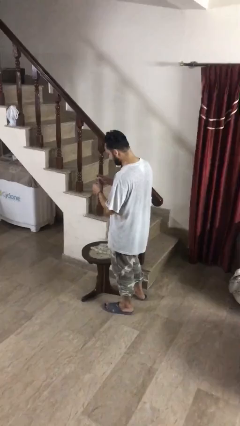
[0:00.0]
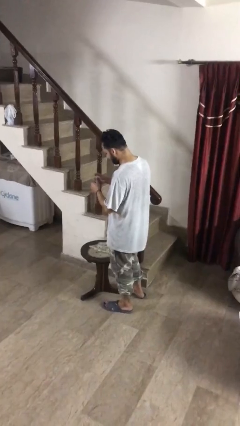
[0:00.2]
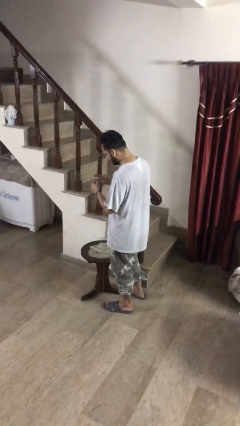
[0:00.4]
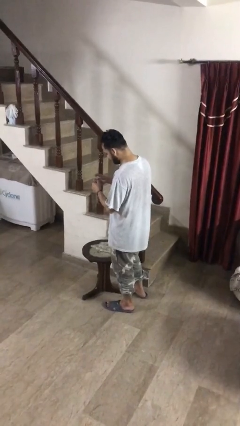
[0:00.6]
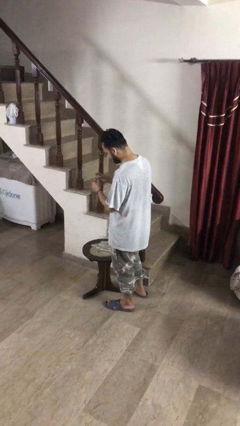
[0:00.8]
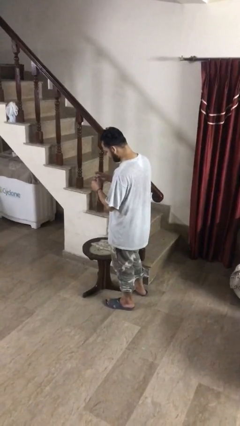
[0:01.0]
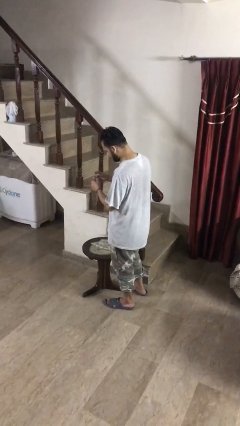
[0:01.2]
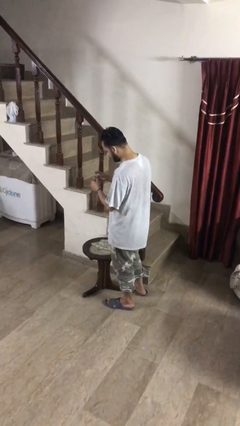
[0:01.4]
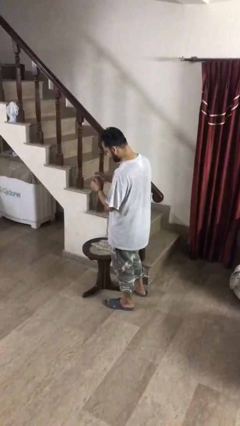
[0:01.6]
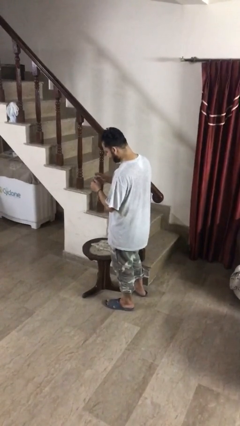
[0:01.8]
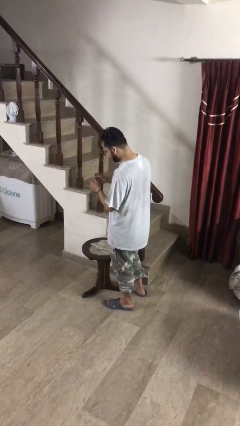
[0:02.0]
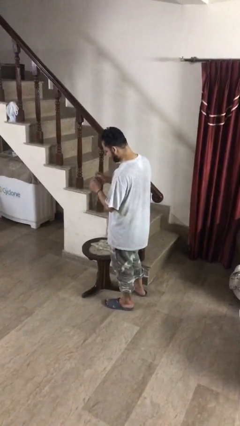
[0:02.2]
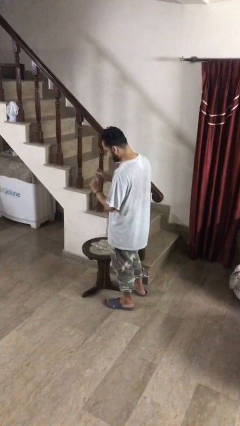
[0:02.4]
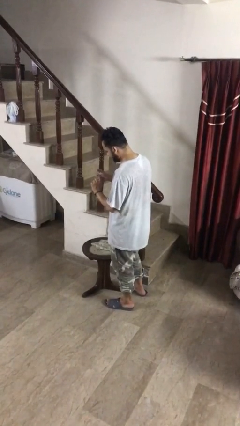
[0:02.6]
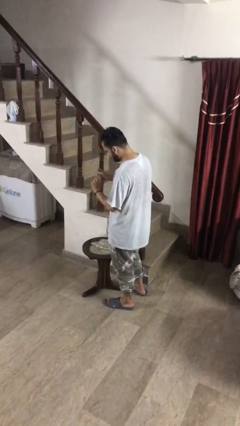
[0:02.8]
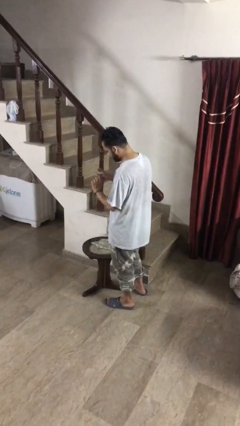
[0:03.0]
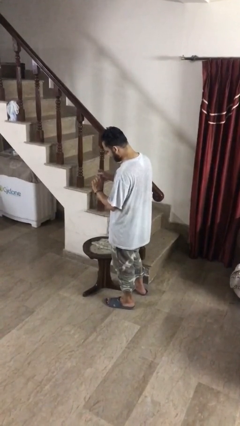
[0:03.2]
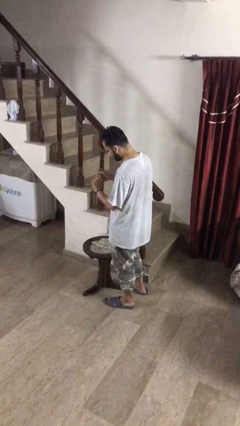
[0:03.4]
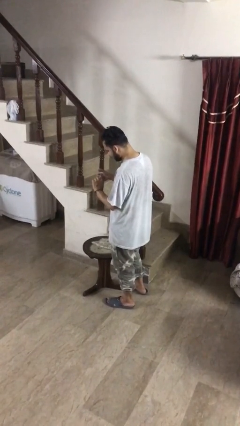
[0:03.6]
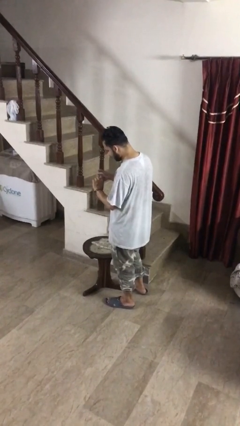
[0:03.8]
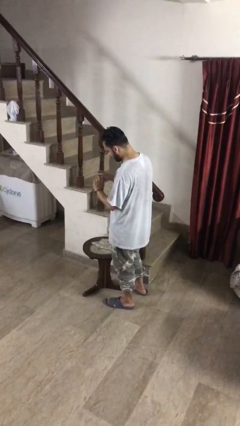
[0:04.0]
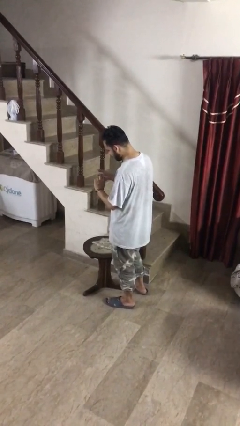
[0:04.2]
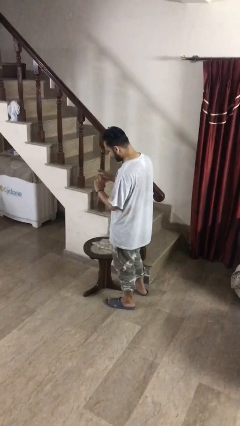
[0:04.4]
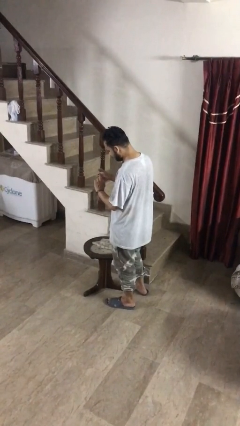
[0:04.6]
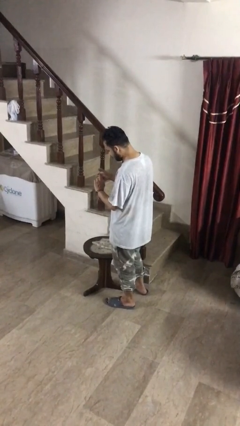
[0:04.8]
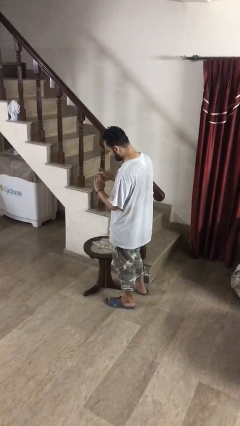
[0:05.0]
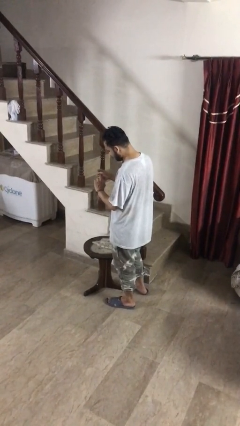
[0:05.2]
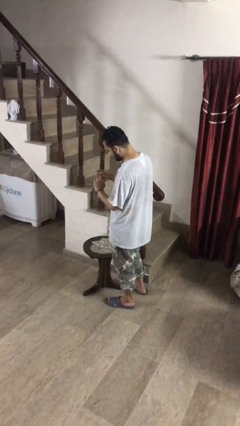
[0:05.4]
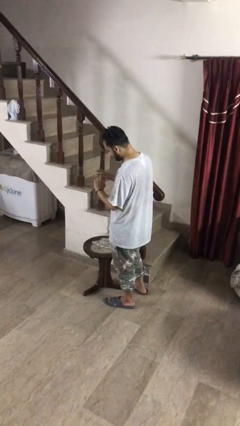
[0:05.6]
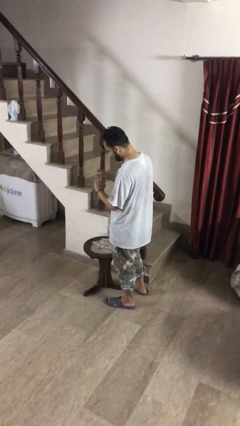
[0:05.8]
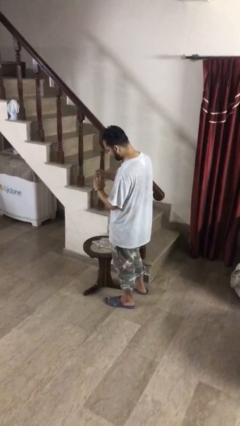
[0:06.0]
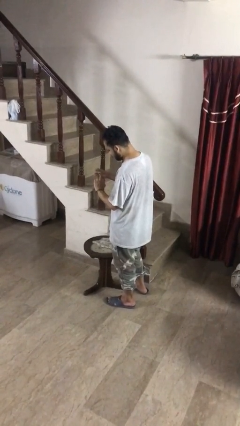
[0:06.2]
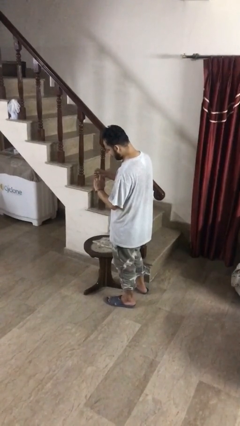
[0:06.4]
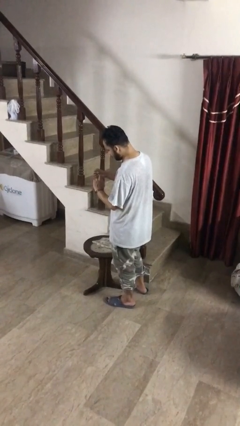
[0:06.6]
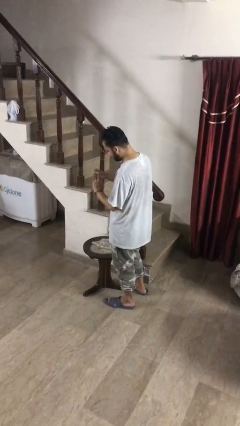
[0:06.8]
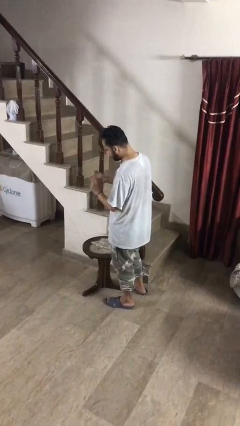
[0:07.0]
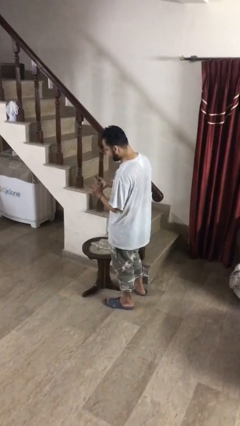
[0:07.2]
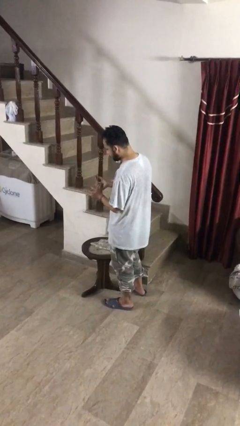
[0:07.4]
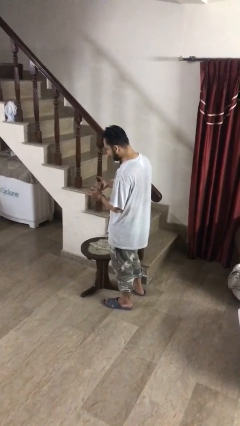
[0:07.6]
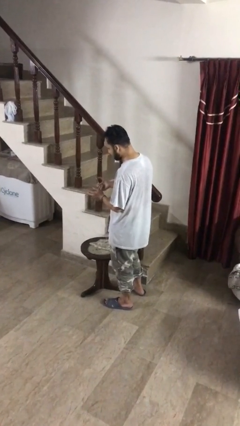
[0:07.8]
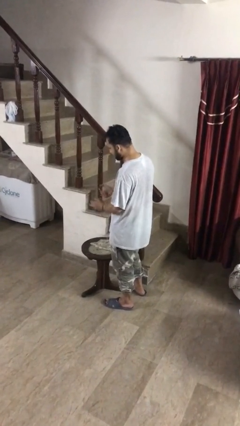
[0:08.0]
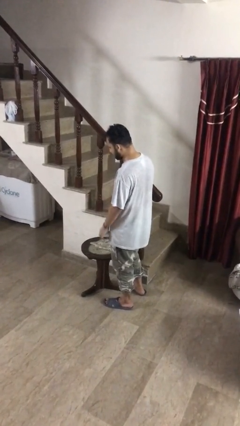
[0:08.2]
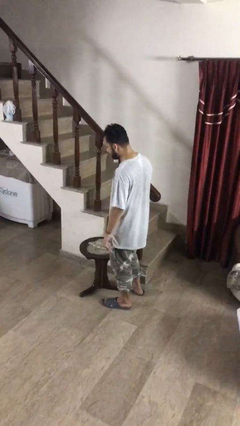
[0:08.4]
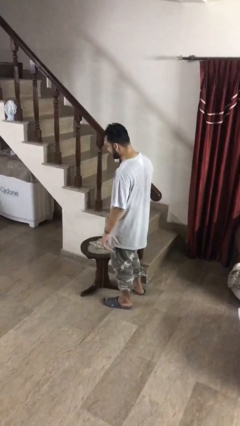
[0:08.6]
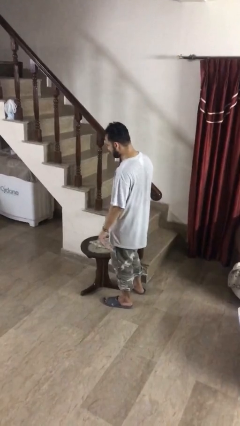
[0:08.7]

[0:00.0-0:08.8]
person clips fingernails

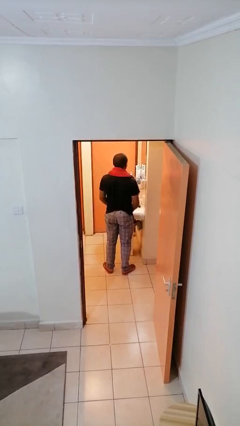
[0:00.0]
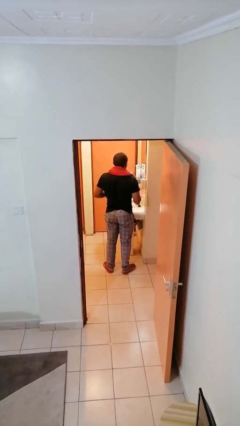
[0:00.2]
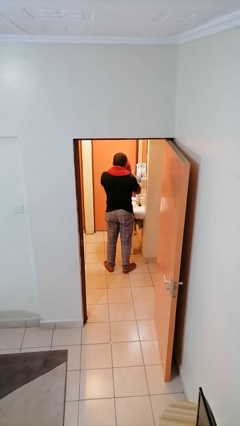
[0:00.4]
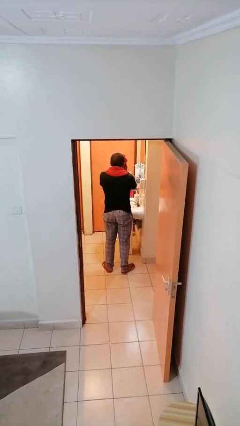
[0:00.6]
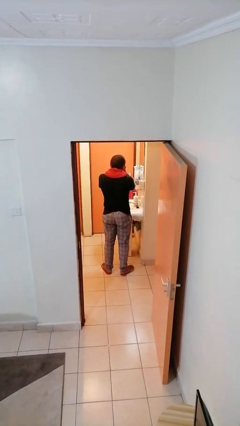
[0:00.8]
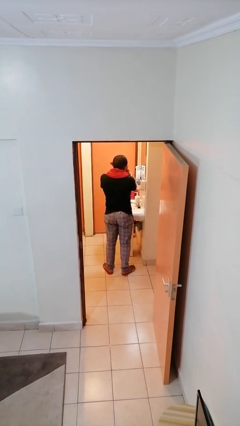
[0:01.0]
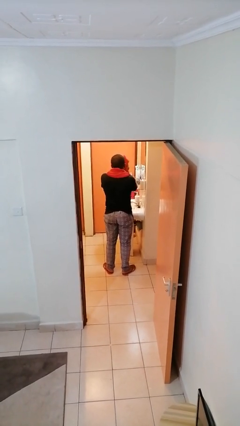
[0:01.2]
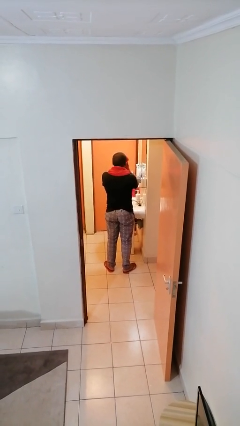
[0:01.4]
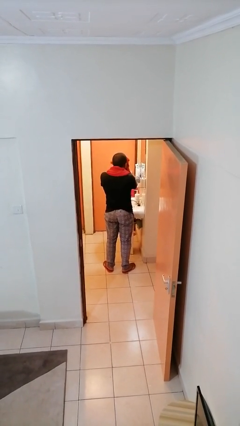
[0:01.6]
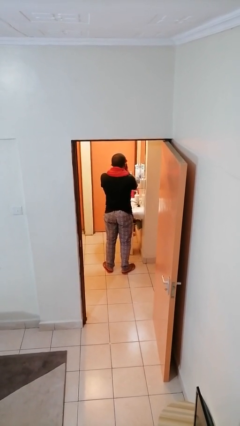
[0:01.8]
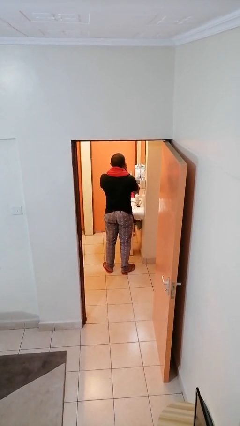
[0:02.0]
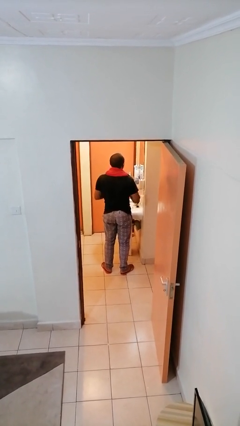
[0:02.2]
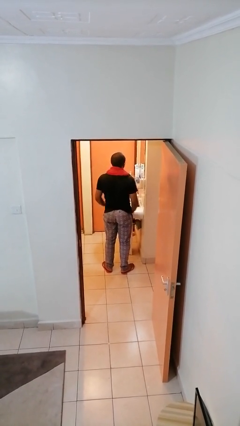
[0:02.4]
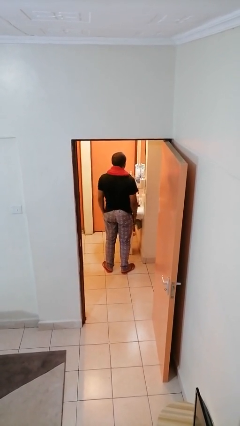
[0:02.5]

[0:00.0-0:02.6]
person dries face with towel

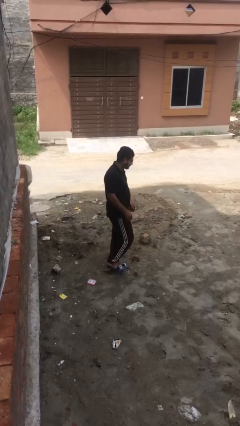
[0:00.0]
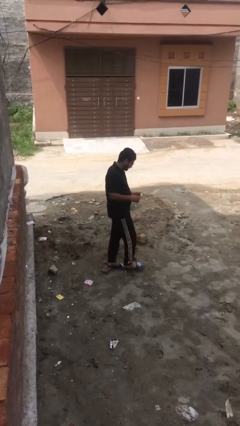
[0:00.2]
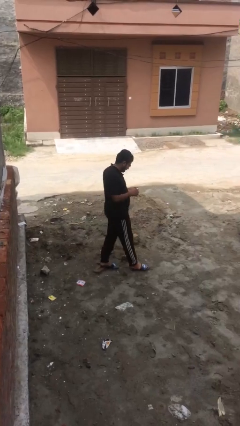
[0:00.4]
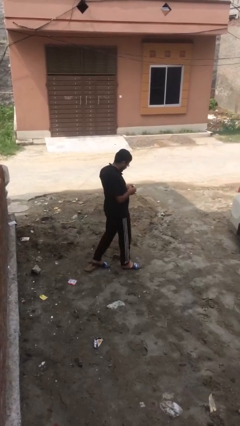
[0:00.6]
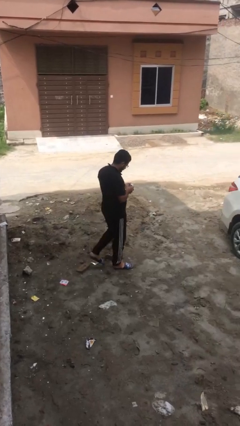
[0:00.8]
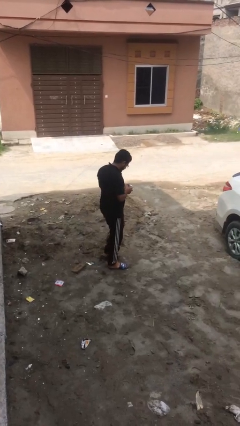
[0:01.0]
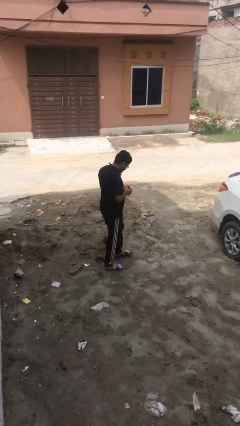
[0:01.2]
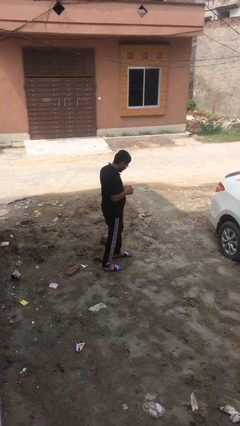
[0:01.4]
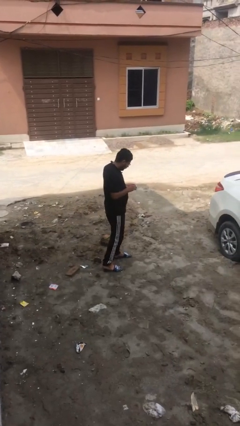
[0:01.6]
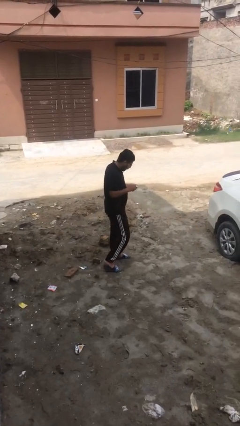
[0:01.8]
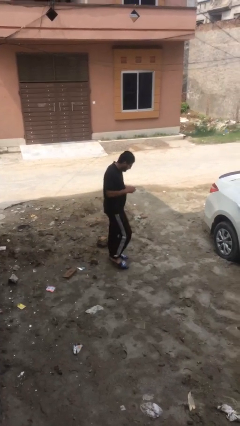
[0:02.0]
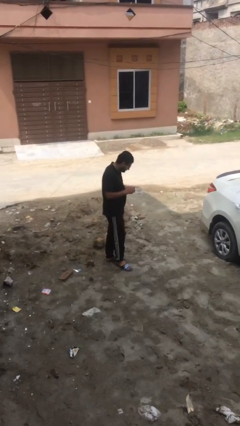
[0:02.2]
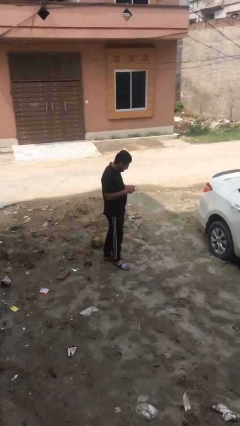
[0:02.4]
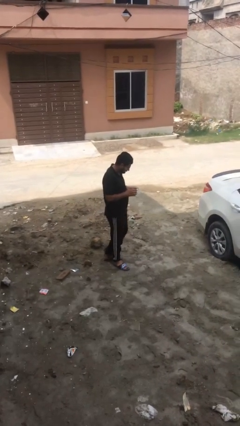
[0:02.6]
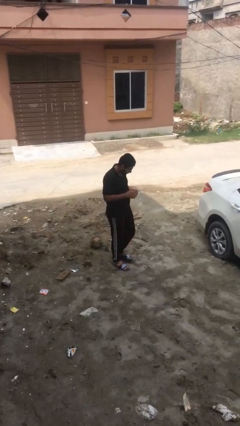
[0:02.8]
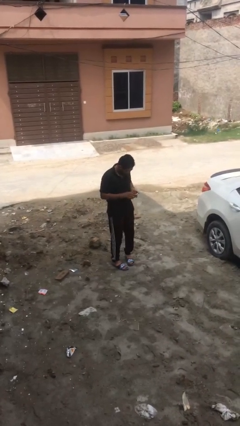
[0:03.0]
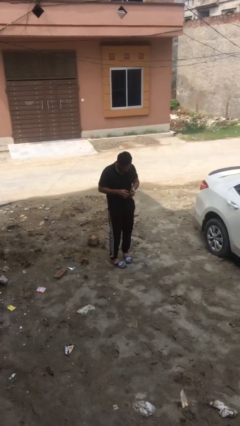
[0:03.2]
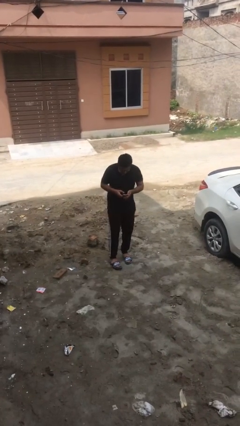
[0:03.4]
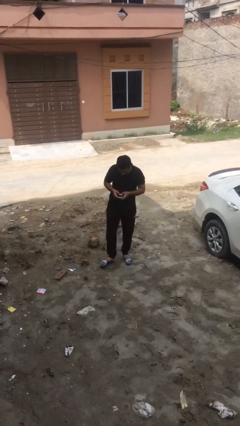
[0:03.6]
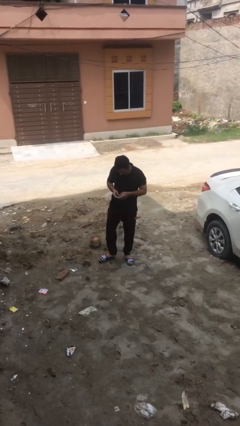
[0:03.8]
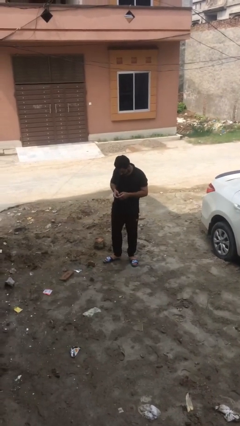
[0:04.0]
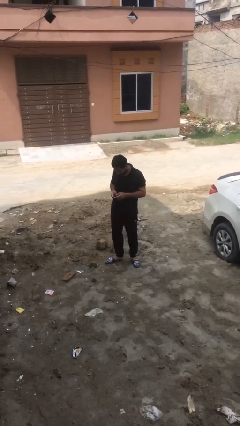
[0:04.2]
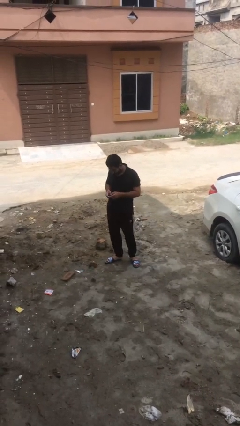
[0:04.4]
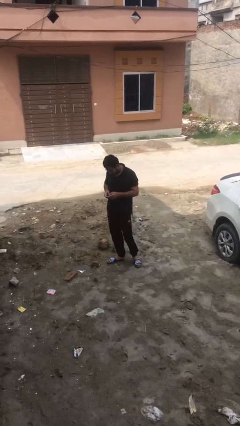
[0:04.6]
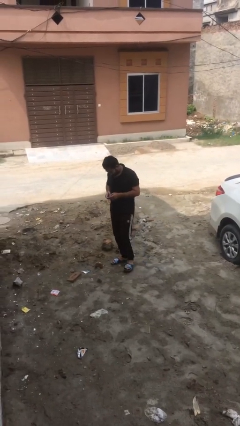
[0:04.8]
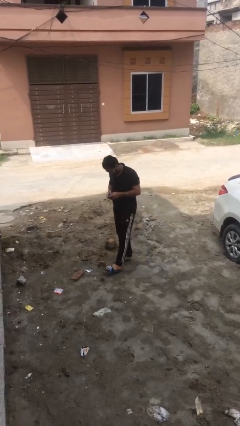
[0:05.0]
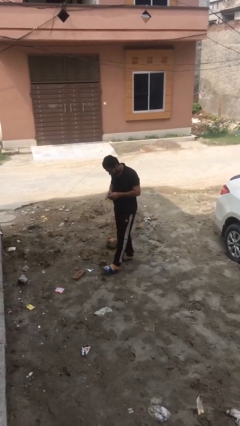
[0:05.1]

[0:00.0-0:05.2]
person texts on phone

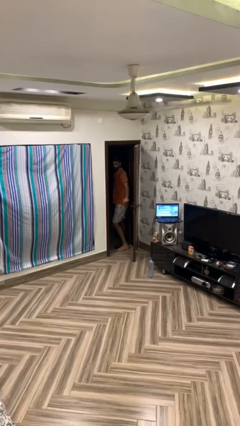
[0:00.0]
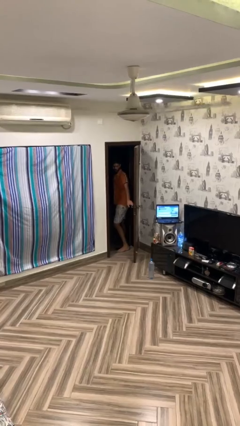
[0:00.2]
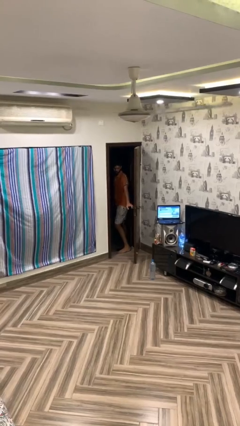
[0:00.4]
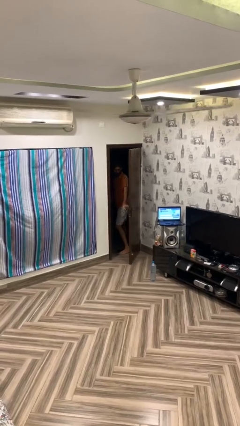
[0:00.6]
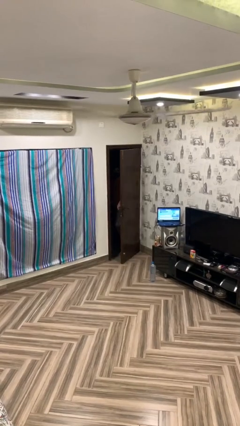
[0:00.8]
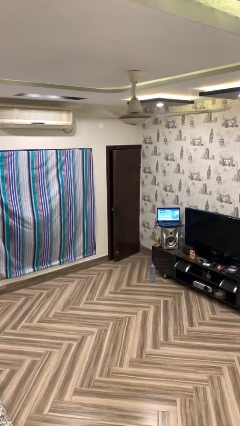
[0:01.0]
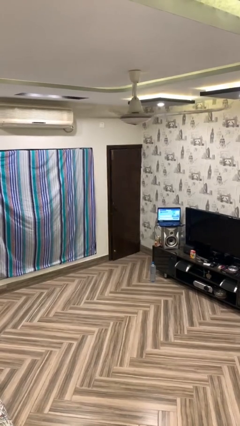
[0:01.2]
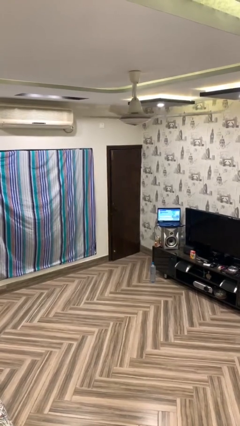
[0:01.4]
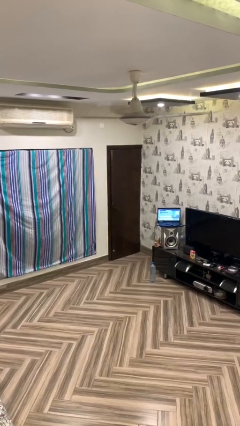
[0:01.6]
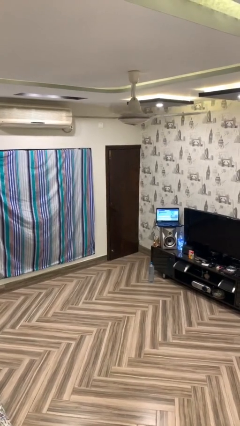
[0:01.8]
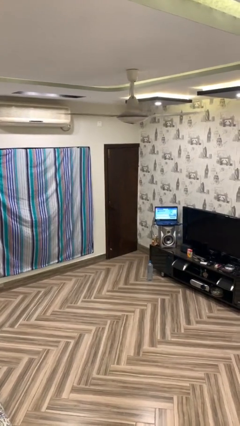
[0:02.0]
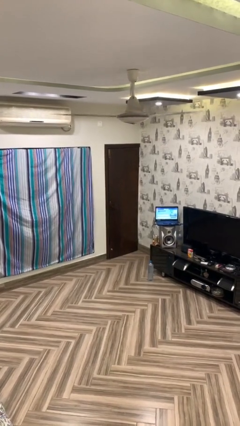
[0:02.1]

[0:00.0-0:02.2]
person closes facility door
